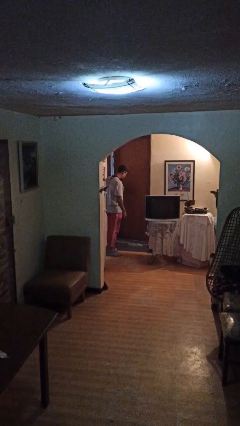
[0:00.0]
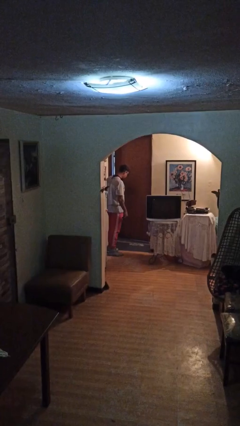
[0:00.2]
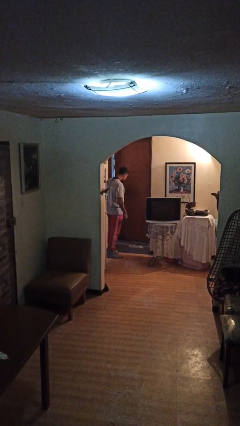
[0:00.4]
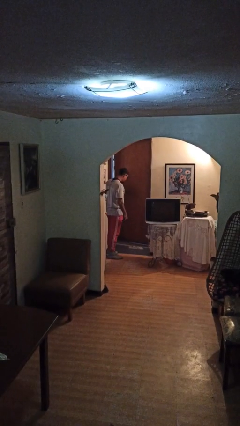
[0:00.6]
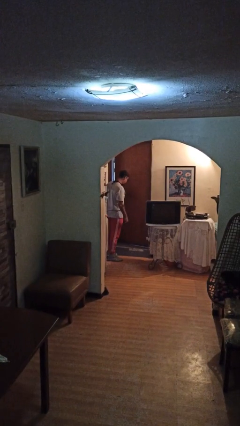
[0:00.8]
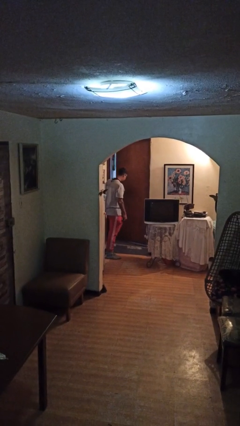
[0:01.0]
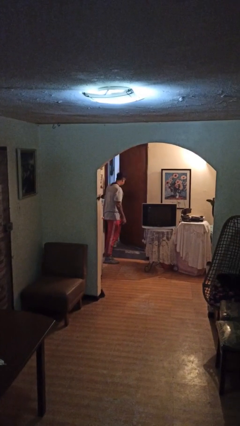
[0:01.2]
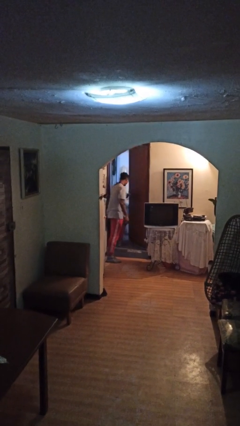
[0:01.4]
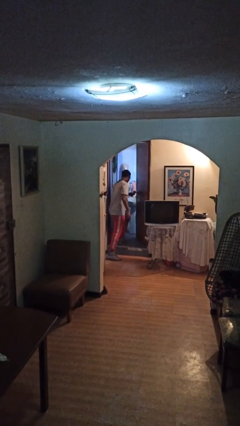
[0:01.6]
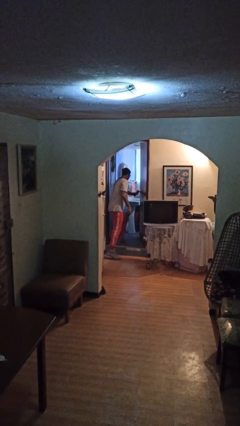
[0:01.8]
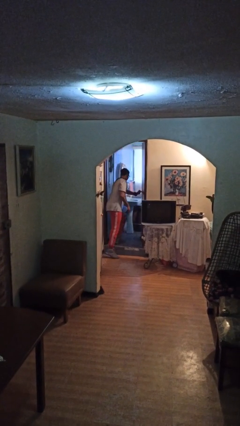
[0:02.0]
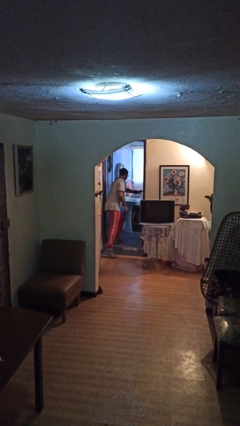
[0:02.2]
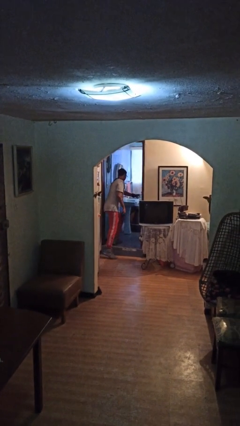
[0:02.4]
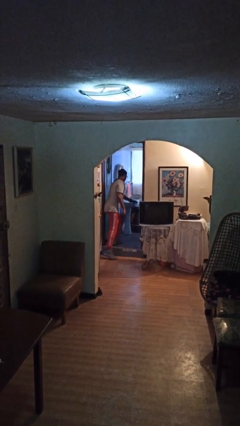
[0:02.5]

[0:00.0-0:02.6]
person opens facility door

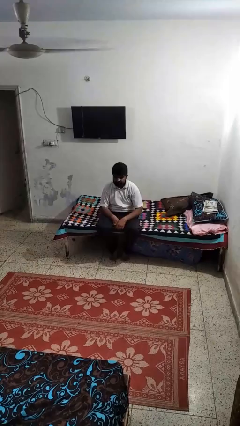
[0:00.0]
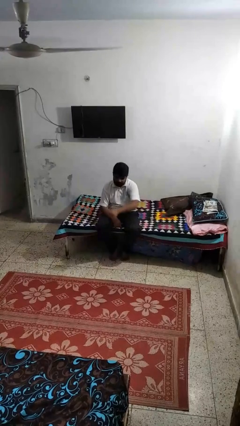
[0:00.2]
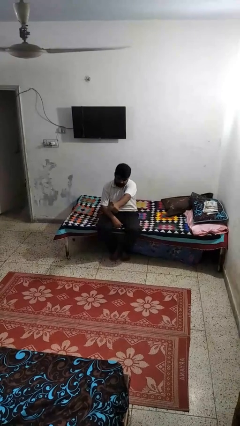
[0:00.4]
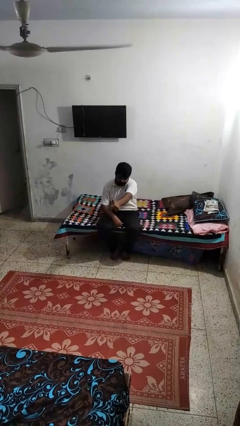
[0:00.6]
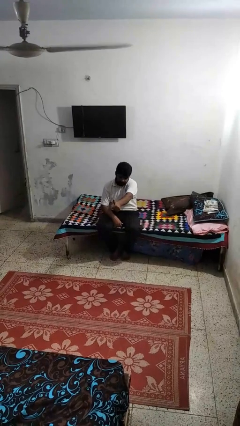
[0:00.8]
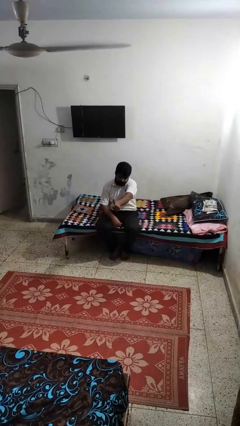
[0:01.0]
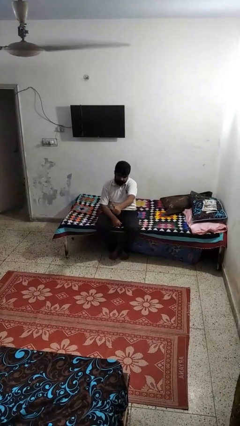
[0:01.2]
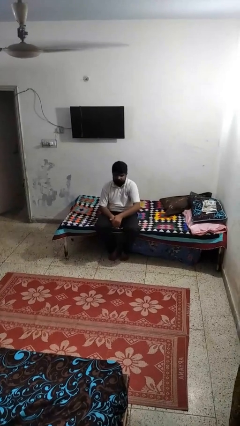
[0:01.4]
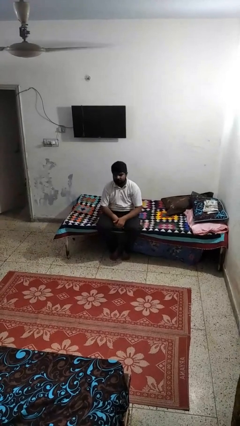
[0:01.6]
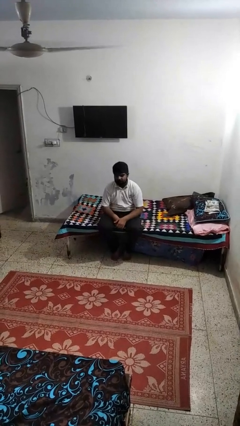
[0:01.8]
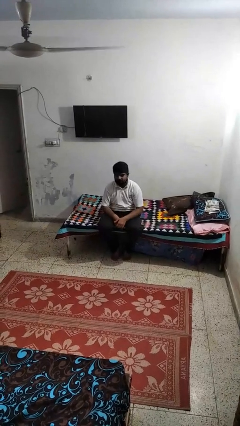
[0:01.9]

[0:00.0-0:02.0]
person gestures thumbs up

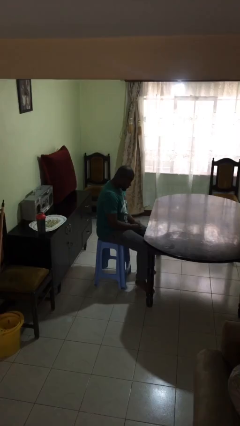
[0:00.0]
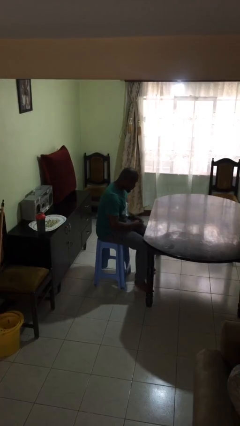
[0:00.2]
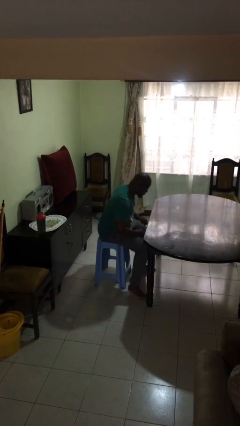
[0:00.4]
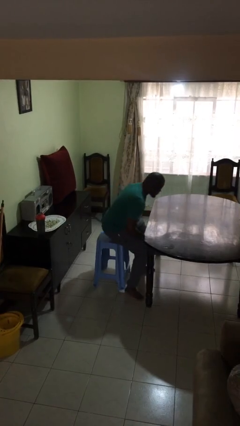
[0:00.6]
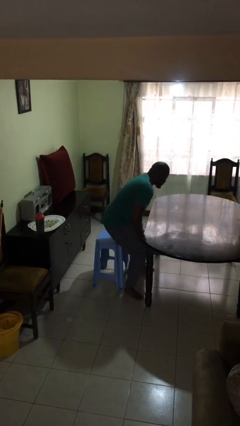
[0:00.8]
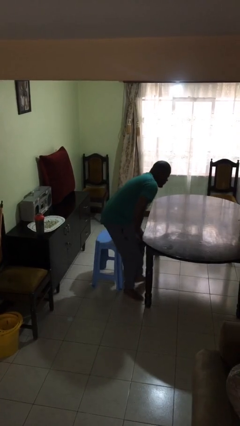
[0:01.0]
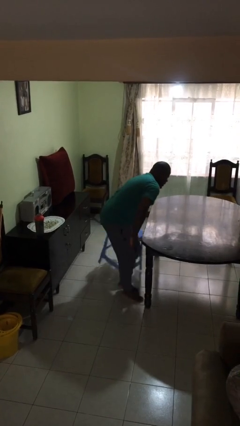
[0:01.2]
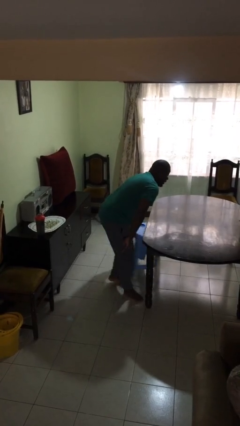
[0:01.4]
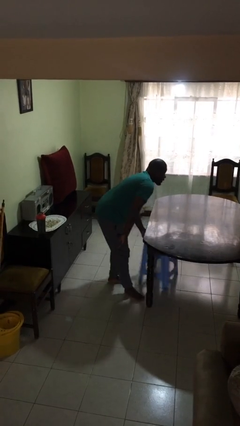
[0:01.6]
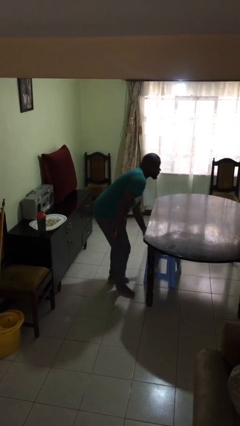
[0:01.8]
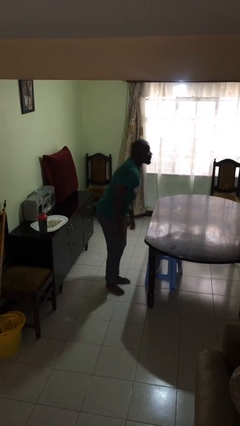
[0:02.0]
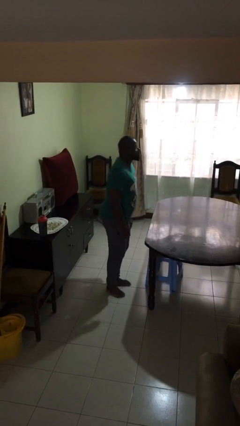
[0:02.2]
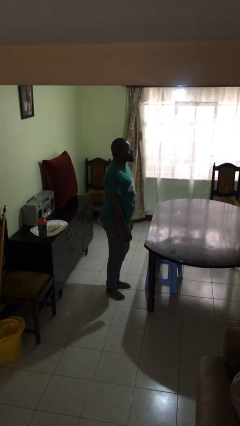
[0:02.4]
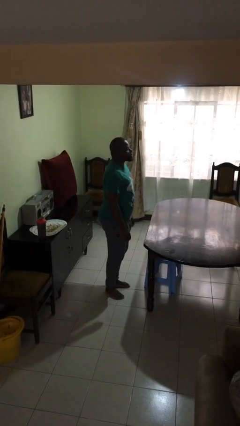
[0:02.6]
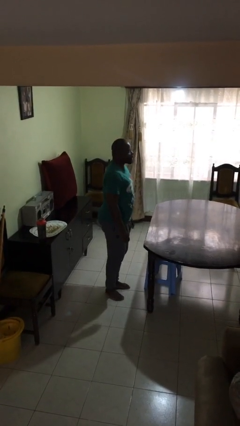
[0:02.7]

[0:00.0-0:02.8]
person stands up

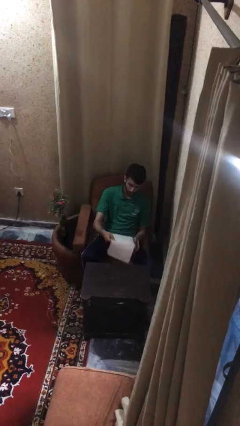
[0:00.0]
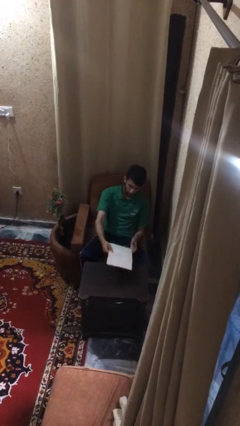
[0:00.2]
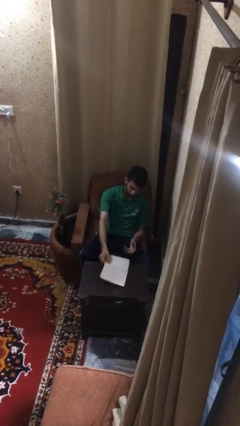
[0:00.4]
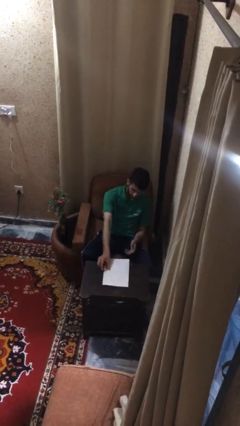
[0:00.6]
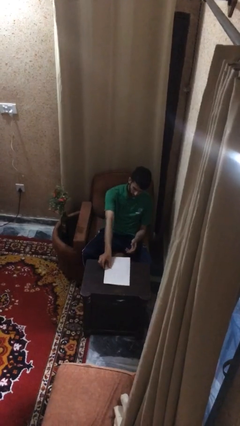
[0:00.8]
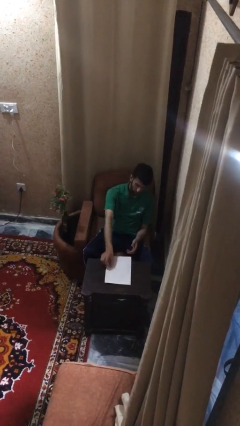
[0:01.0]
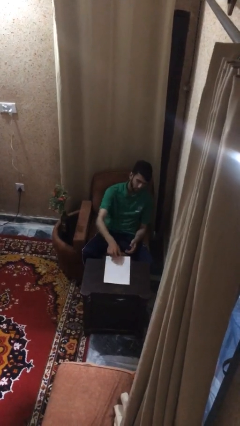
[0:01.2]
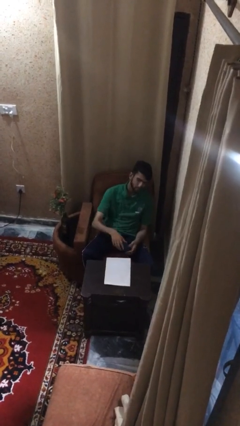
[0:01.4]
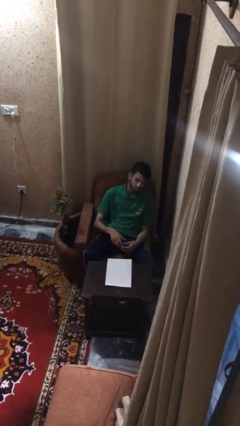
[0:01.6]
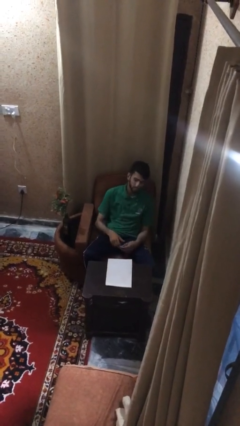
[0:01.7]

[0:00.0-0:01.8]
person puts down object on table

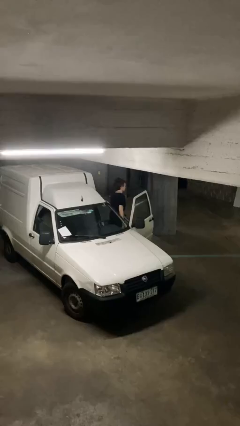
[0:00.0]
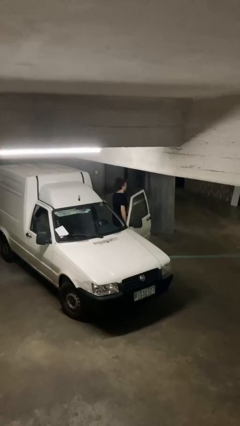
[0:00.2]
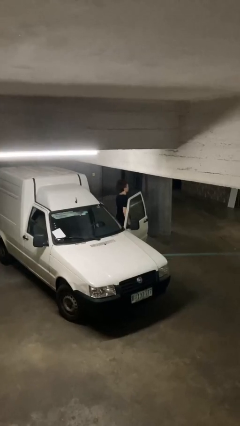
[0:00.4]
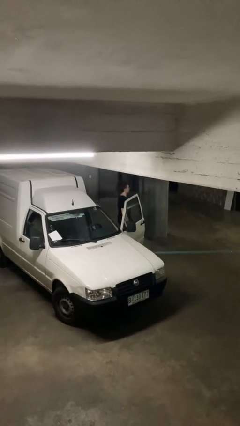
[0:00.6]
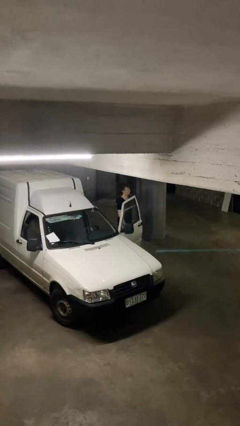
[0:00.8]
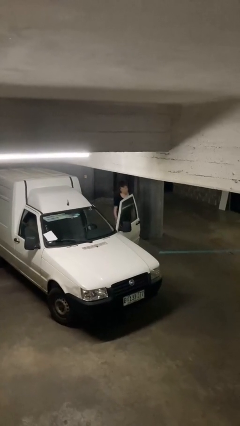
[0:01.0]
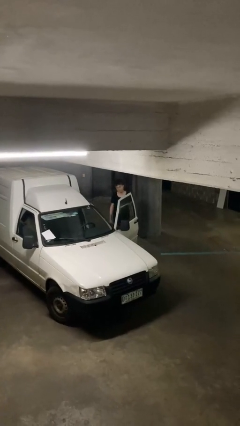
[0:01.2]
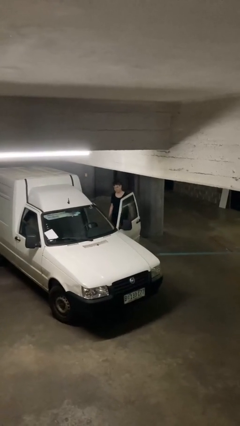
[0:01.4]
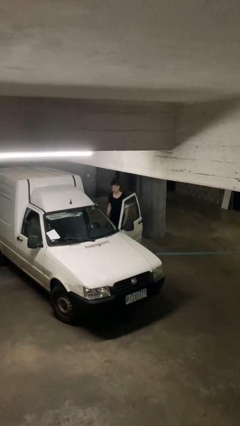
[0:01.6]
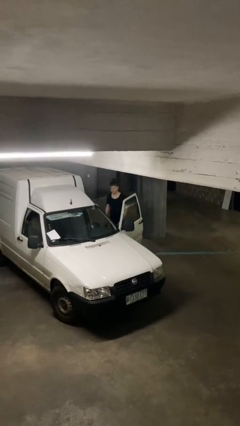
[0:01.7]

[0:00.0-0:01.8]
person exits car

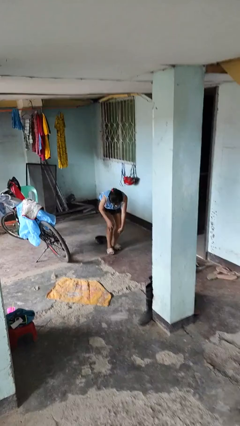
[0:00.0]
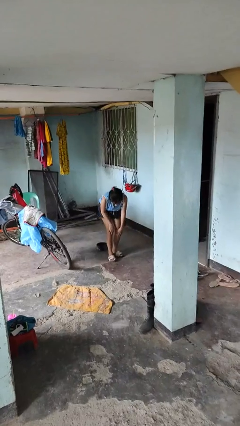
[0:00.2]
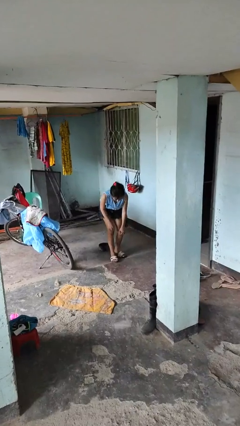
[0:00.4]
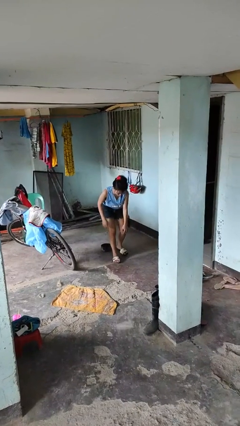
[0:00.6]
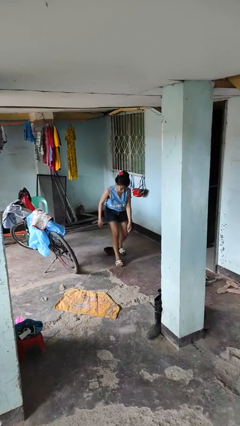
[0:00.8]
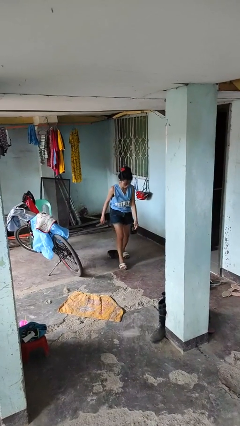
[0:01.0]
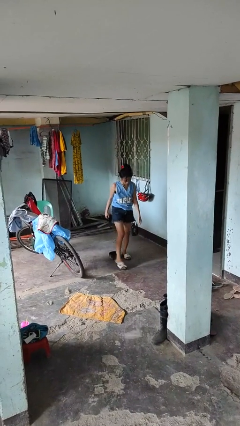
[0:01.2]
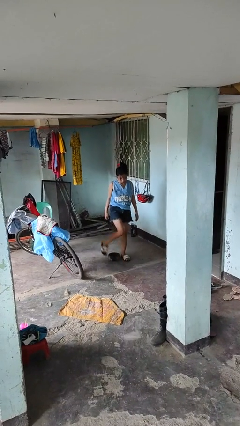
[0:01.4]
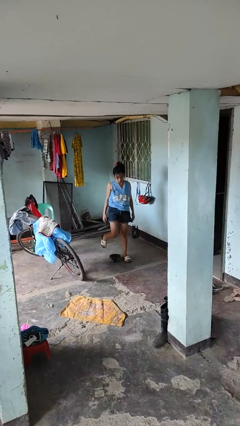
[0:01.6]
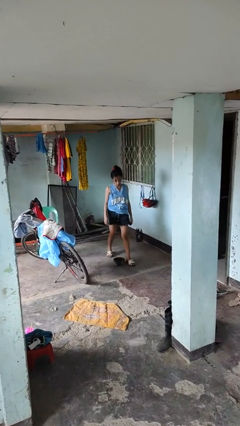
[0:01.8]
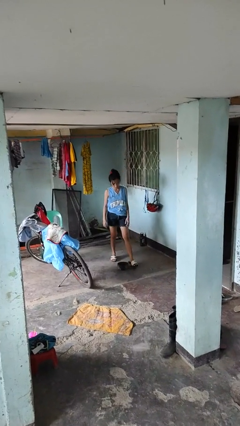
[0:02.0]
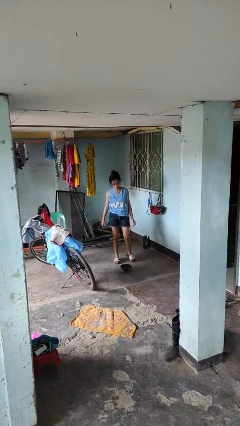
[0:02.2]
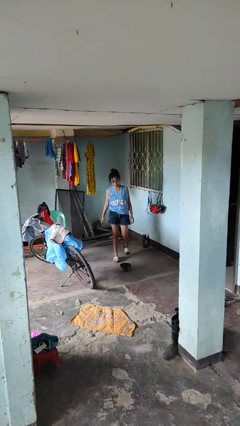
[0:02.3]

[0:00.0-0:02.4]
person stands up from floor

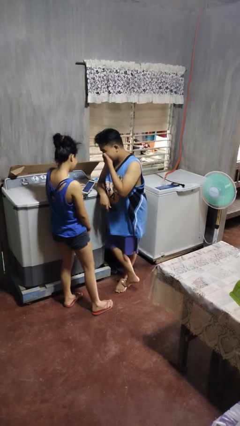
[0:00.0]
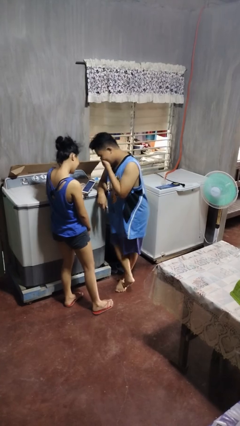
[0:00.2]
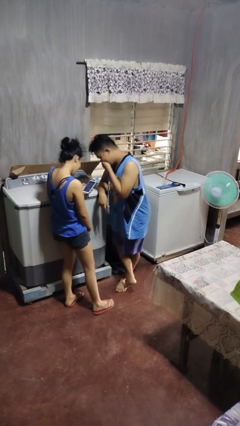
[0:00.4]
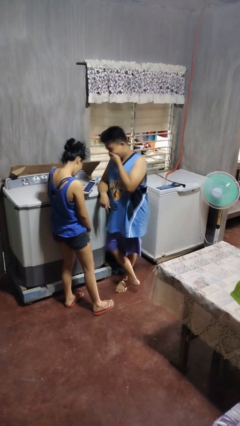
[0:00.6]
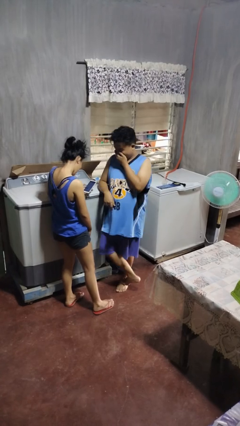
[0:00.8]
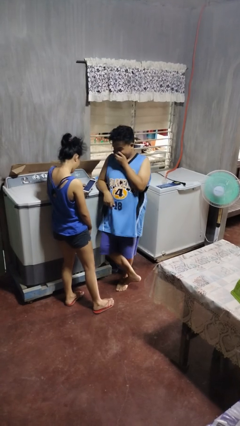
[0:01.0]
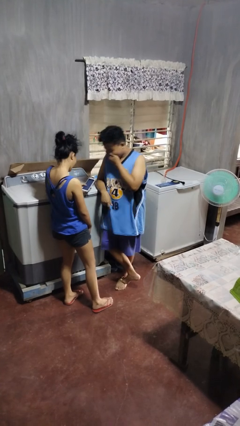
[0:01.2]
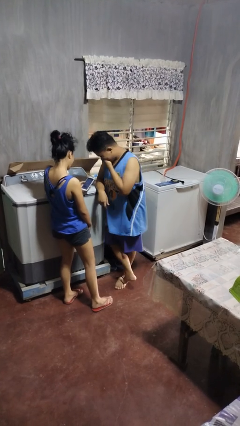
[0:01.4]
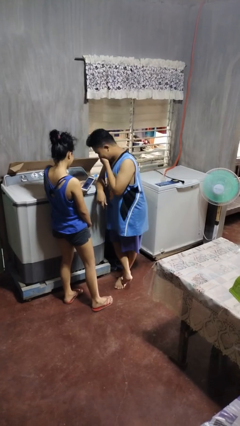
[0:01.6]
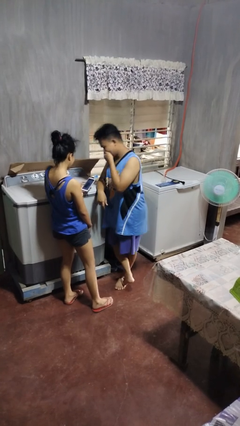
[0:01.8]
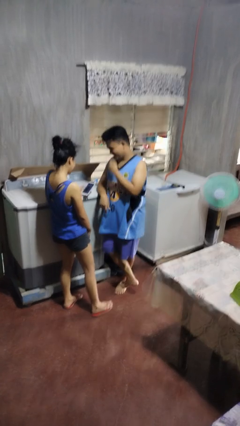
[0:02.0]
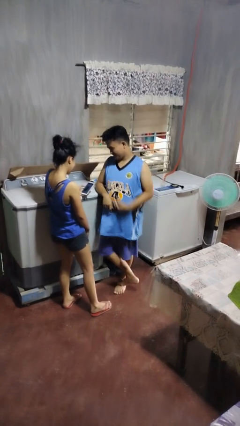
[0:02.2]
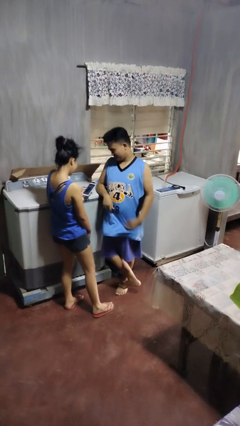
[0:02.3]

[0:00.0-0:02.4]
person laughs with person

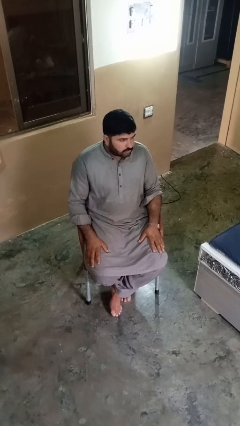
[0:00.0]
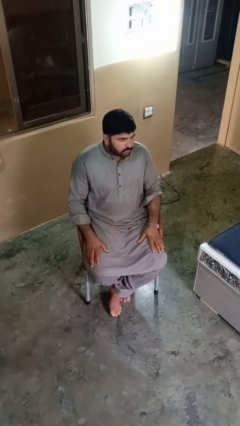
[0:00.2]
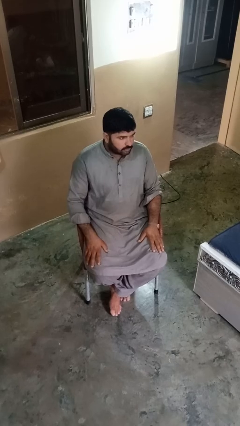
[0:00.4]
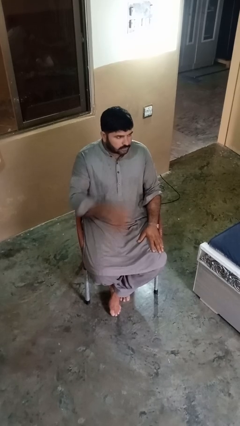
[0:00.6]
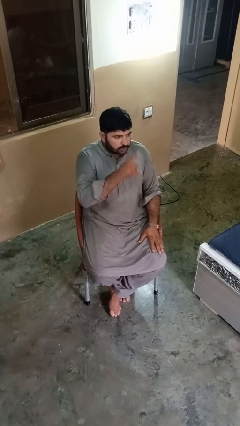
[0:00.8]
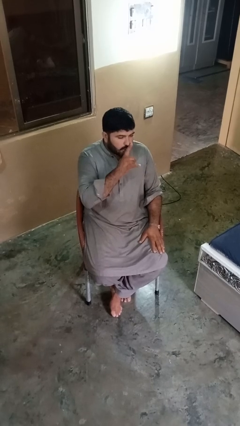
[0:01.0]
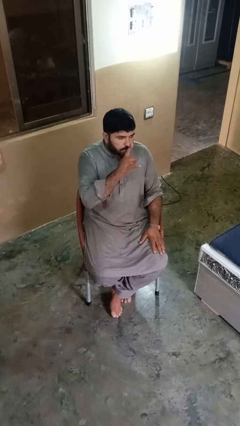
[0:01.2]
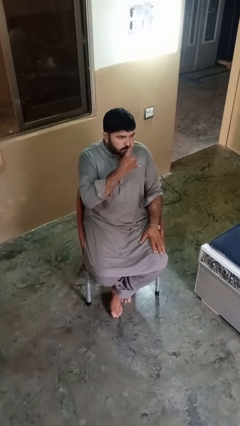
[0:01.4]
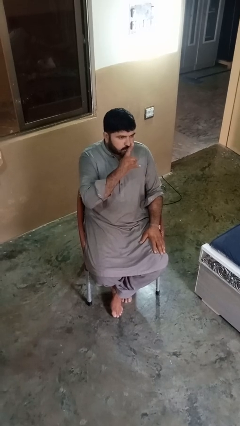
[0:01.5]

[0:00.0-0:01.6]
person gestures be quiet
